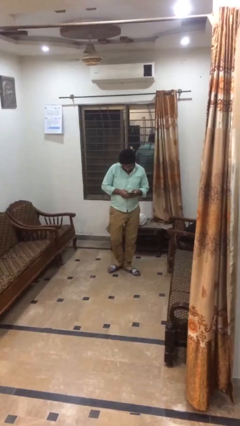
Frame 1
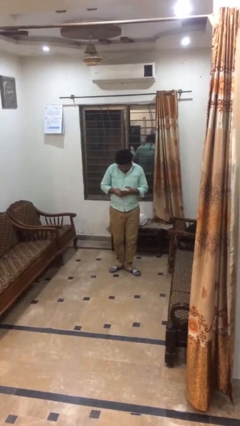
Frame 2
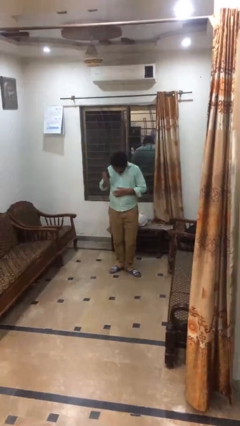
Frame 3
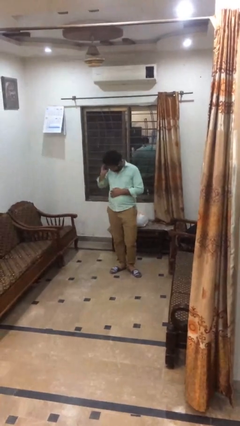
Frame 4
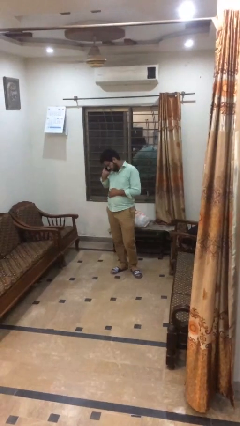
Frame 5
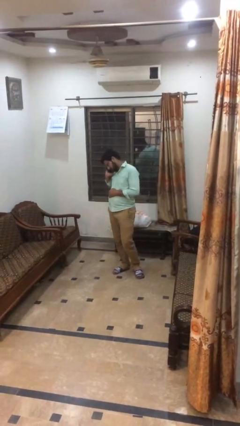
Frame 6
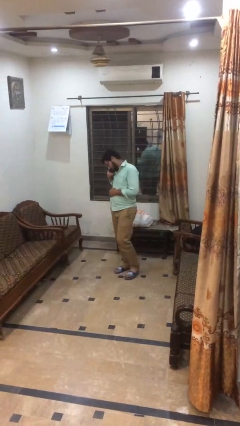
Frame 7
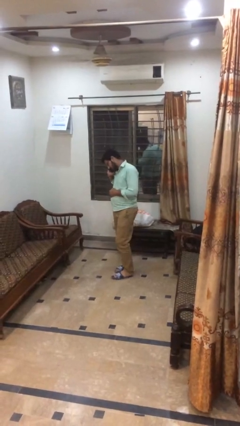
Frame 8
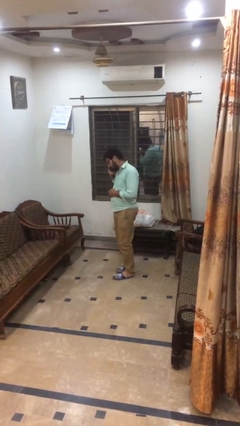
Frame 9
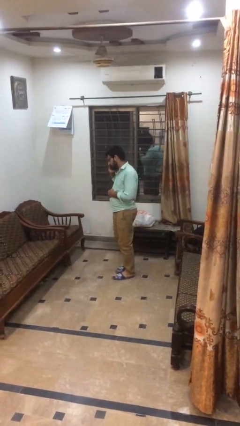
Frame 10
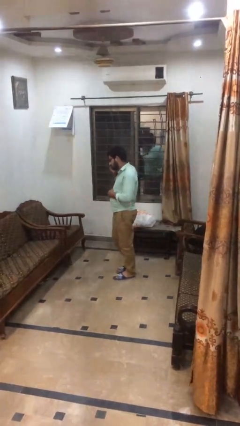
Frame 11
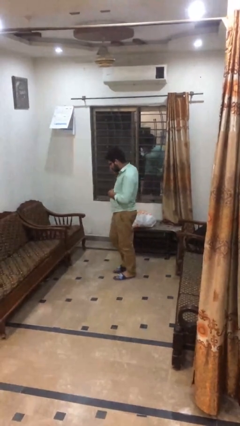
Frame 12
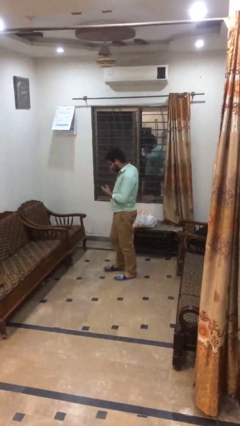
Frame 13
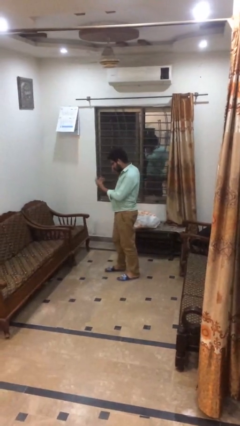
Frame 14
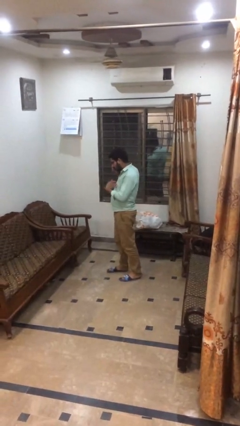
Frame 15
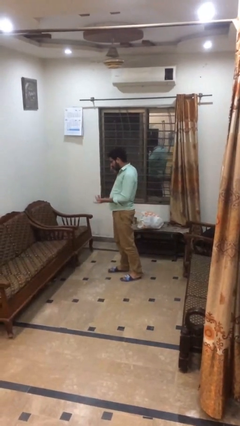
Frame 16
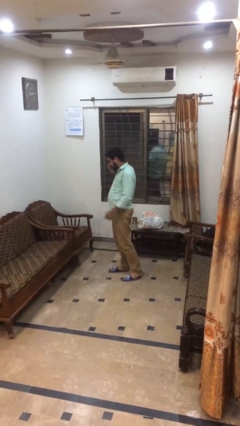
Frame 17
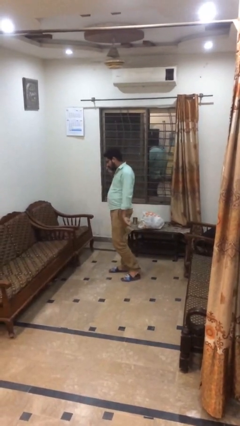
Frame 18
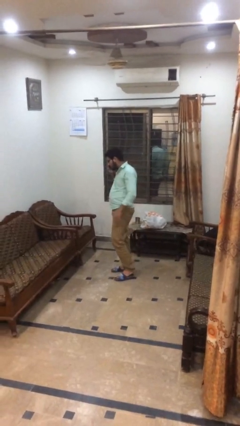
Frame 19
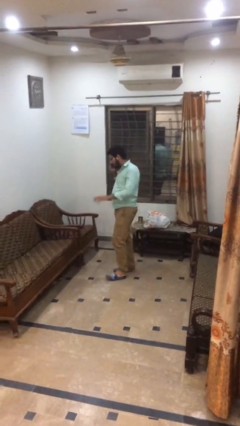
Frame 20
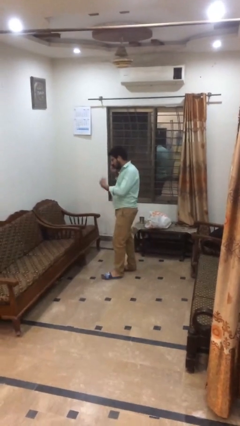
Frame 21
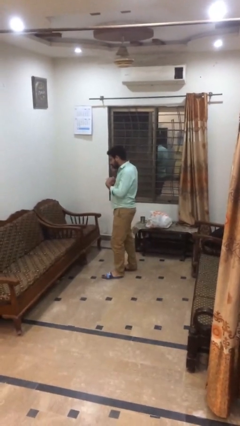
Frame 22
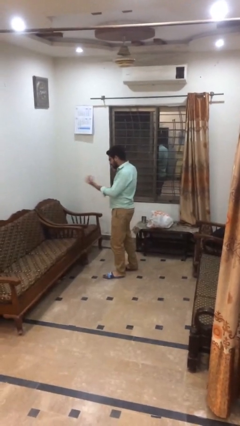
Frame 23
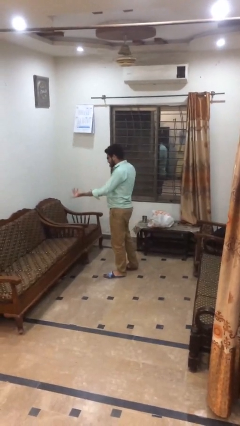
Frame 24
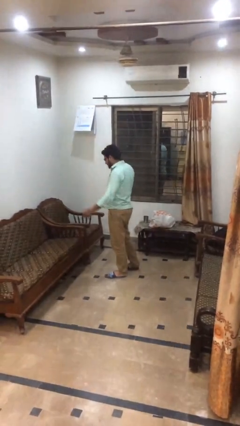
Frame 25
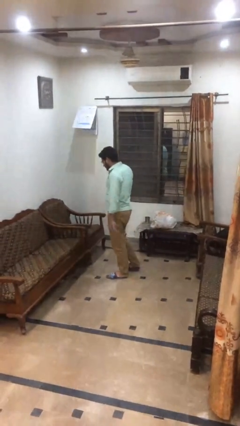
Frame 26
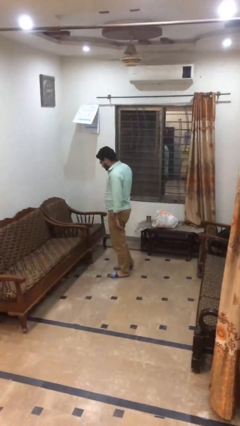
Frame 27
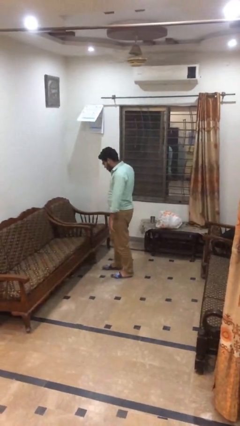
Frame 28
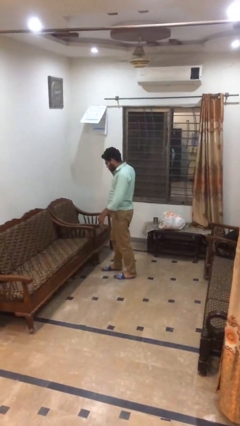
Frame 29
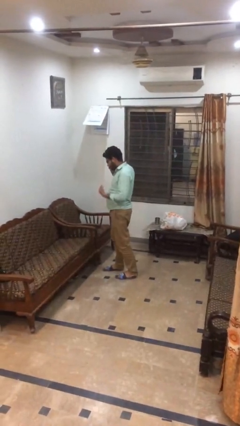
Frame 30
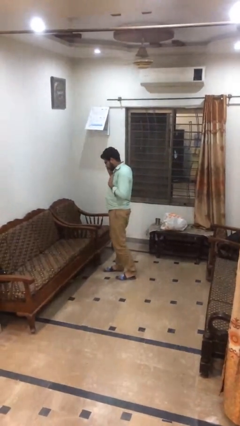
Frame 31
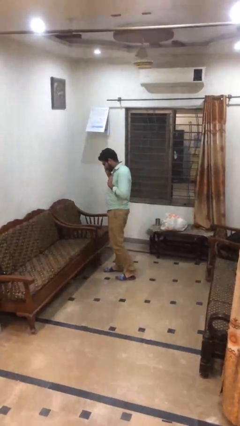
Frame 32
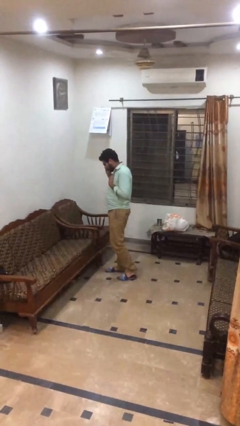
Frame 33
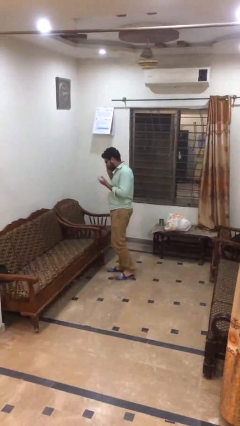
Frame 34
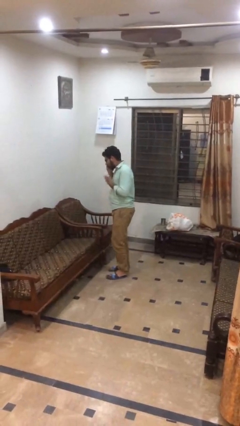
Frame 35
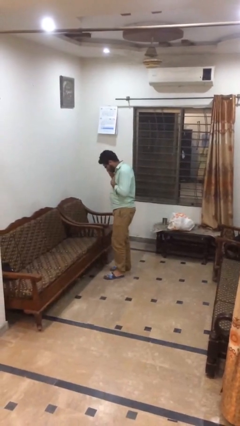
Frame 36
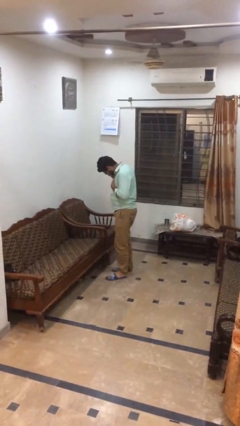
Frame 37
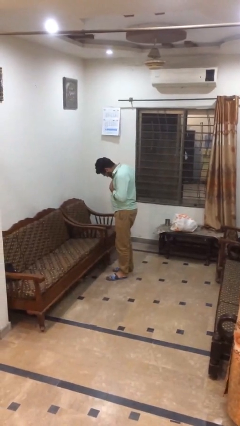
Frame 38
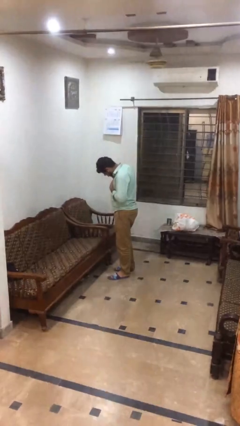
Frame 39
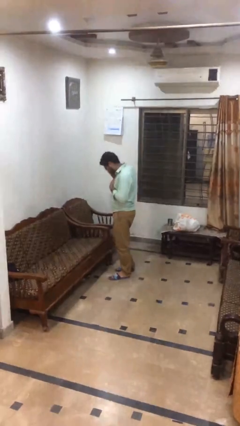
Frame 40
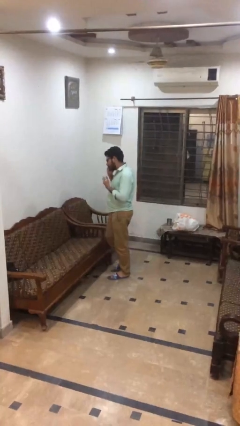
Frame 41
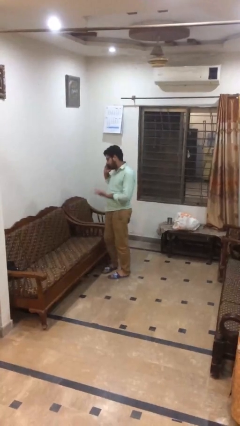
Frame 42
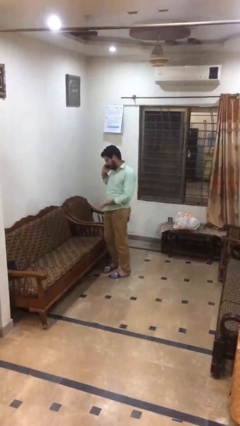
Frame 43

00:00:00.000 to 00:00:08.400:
person talks on phone

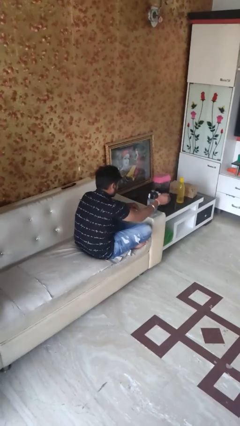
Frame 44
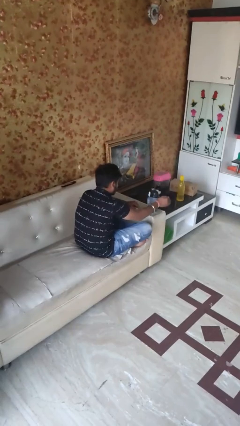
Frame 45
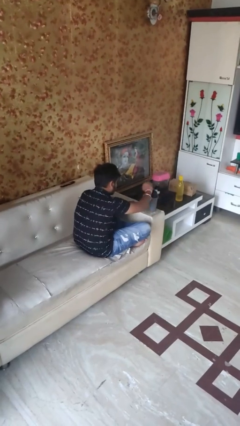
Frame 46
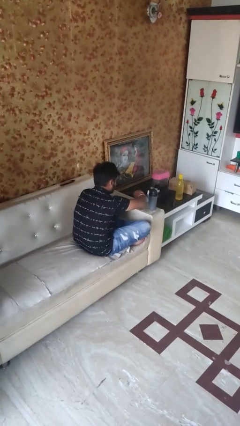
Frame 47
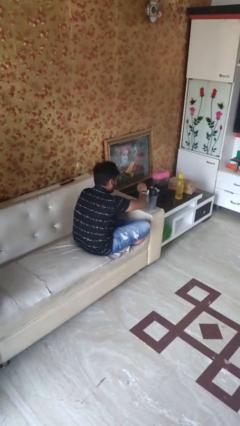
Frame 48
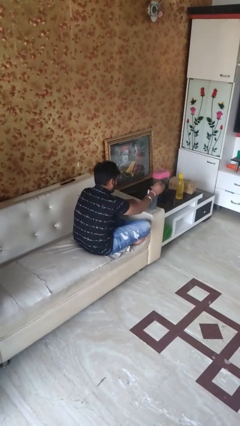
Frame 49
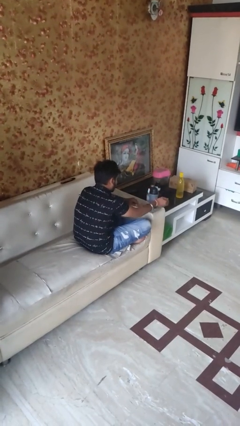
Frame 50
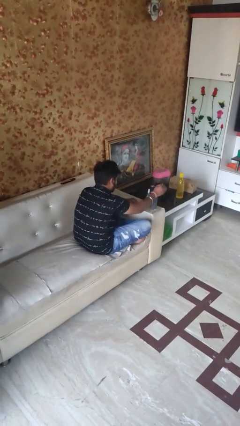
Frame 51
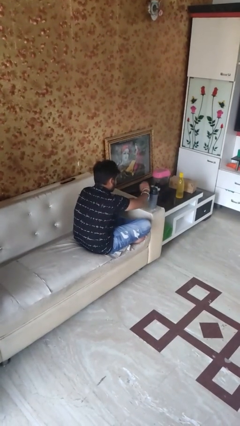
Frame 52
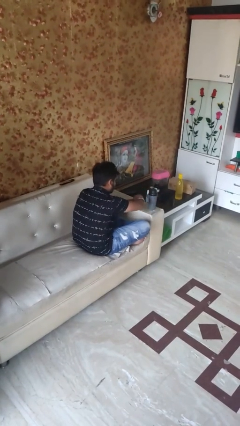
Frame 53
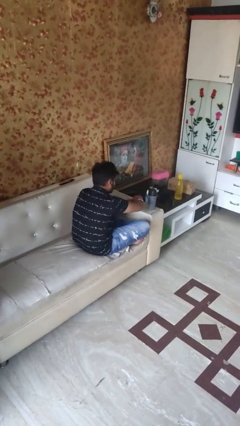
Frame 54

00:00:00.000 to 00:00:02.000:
person waves hand over object

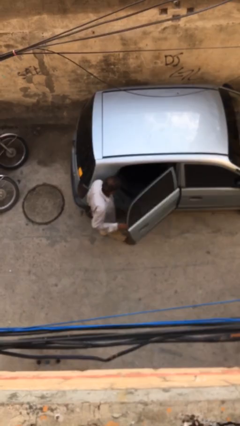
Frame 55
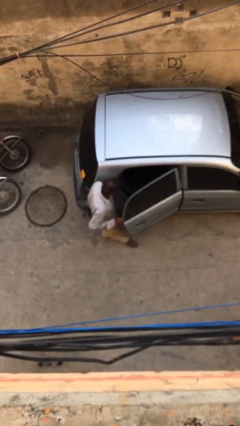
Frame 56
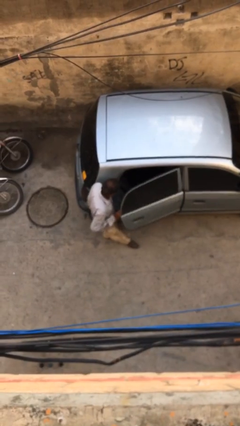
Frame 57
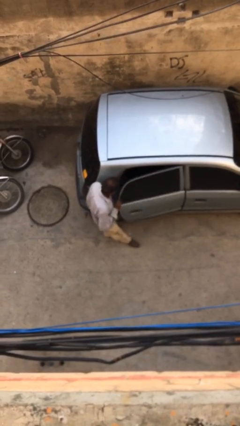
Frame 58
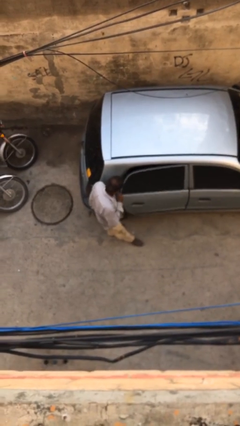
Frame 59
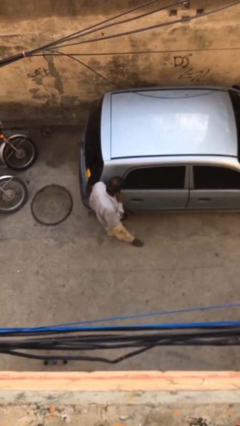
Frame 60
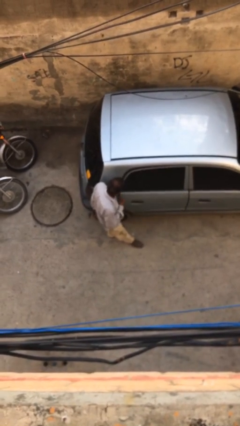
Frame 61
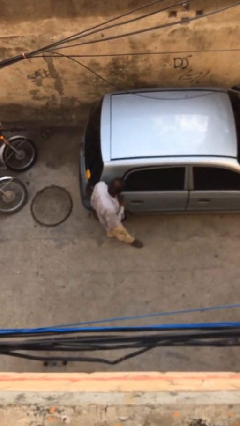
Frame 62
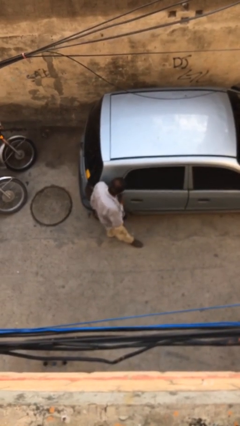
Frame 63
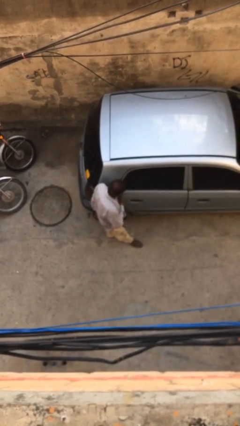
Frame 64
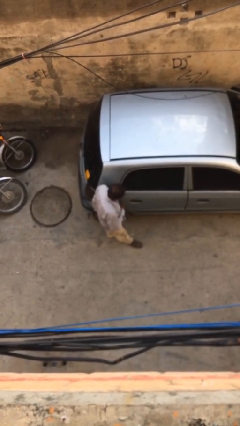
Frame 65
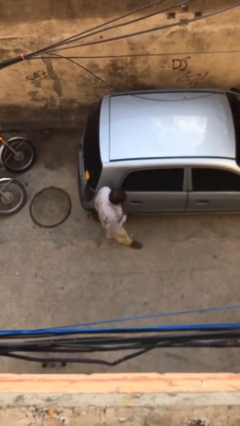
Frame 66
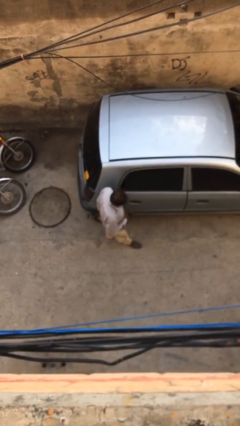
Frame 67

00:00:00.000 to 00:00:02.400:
person closes car door

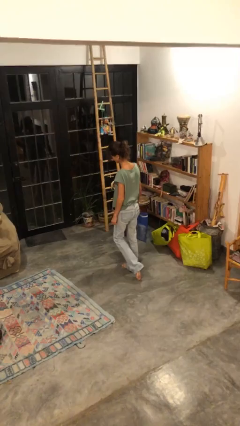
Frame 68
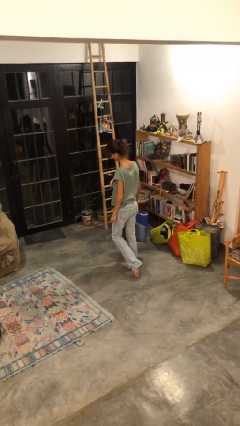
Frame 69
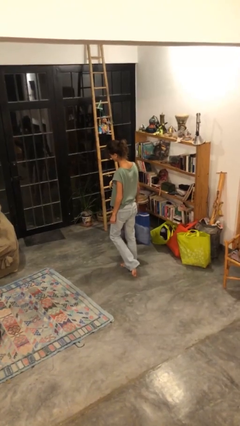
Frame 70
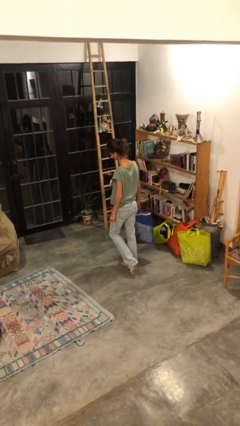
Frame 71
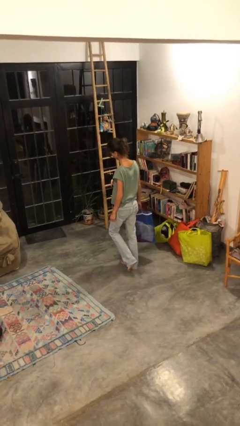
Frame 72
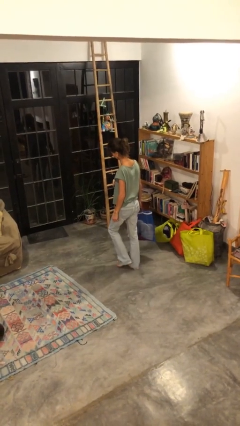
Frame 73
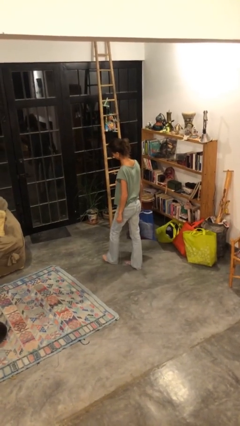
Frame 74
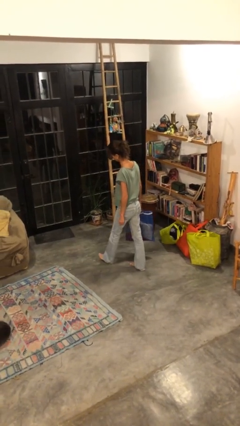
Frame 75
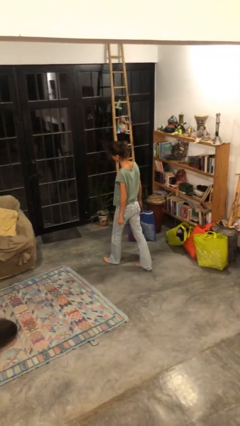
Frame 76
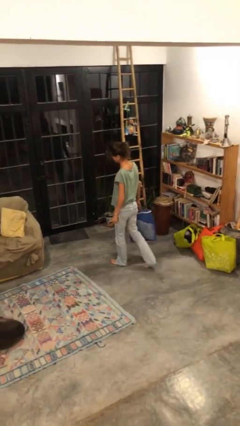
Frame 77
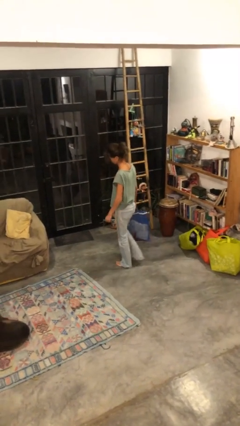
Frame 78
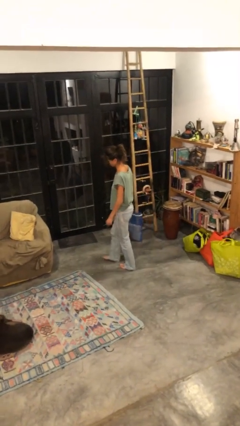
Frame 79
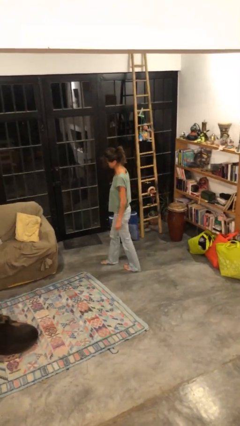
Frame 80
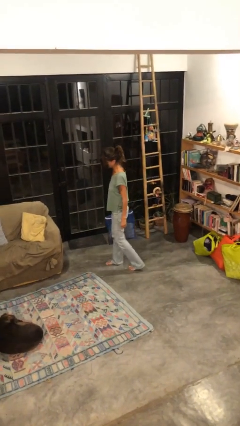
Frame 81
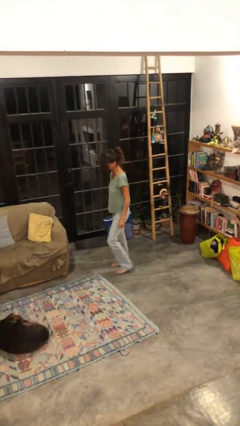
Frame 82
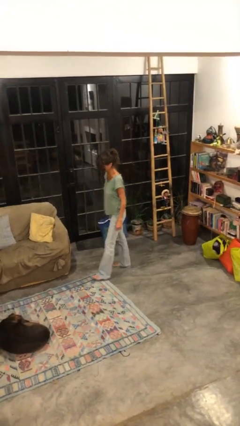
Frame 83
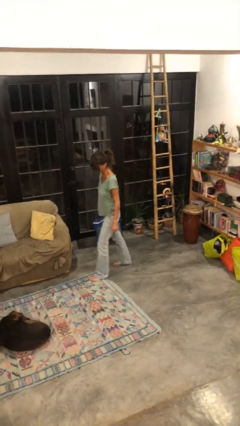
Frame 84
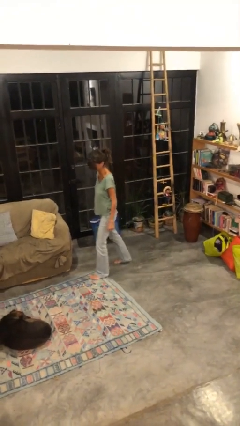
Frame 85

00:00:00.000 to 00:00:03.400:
person carries groceries

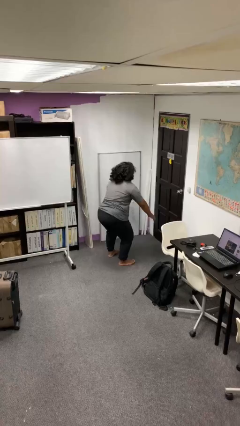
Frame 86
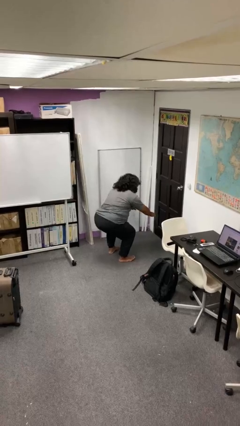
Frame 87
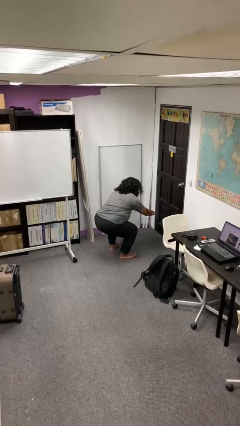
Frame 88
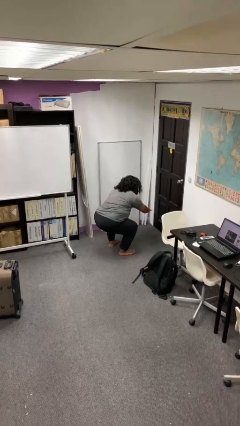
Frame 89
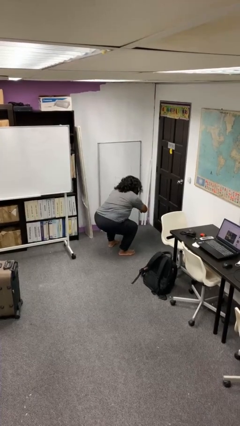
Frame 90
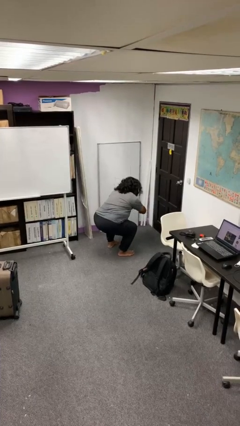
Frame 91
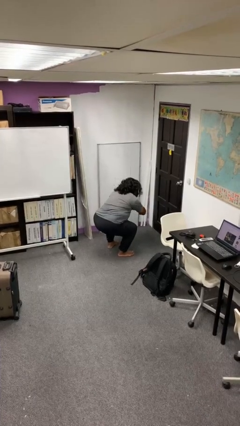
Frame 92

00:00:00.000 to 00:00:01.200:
person squats
